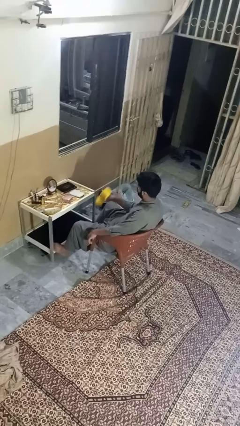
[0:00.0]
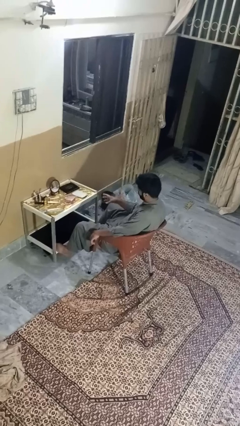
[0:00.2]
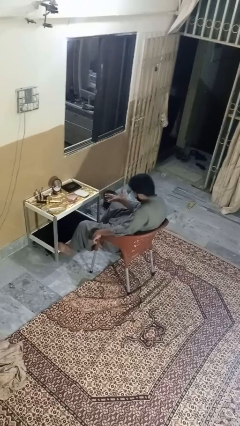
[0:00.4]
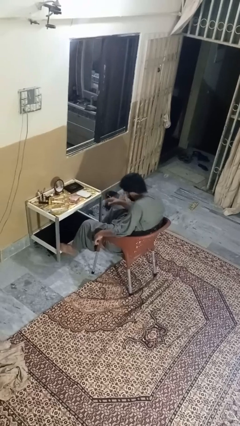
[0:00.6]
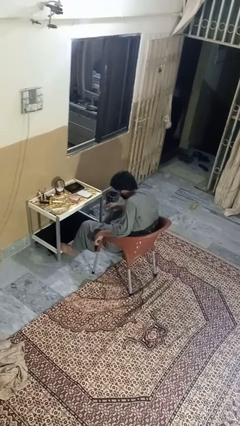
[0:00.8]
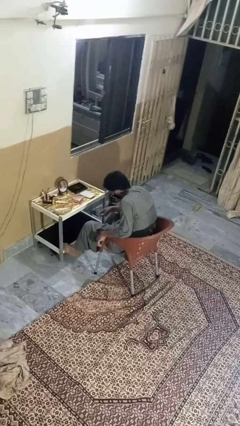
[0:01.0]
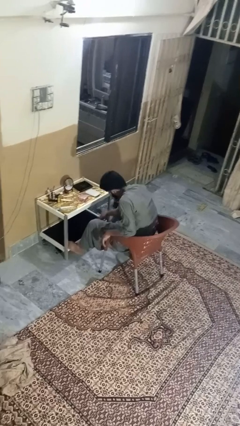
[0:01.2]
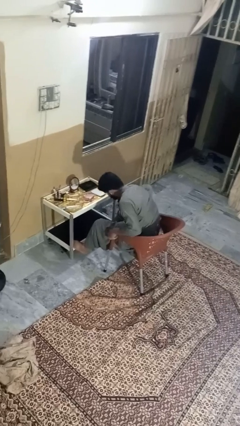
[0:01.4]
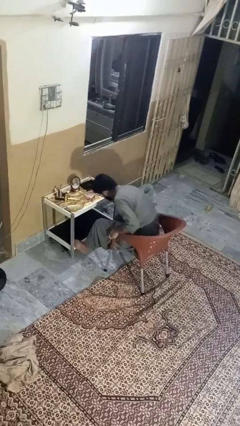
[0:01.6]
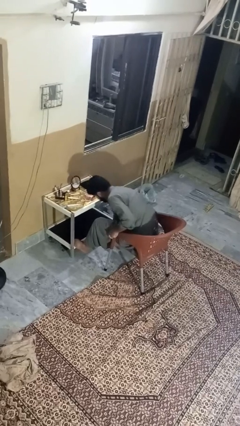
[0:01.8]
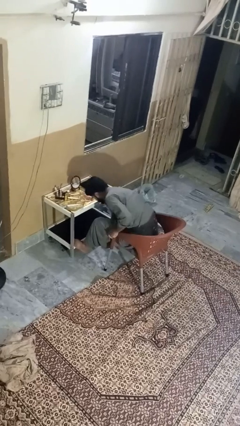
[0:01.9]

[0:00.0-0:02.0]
person throws object to ground

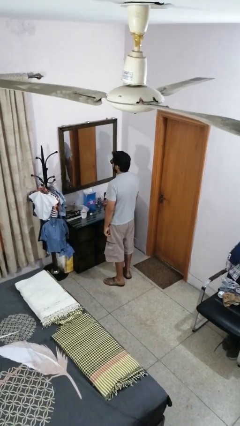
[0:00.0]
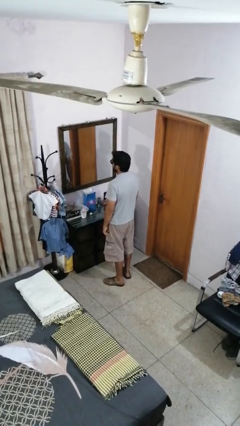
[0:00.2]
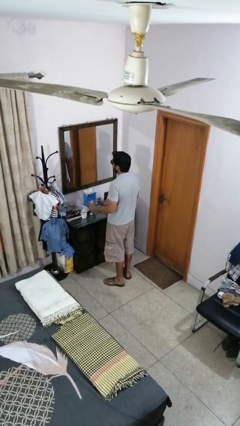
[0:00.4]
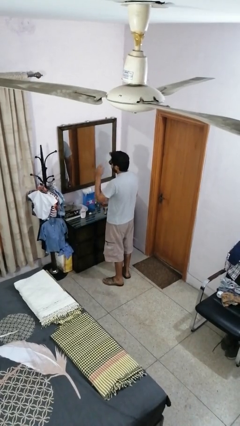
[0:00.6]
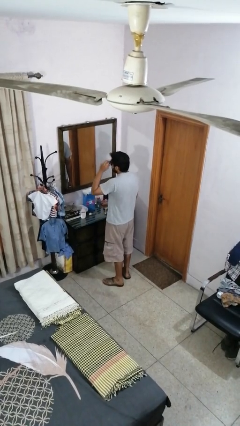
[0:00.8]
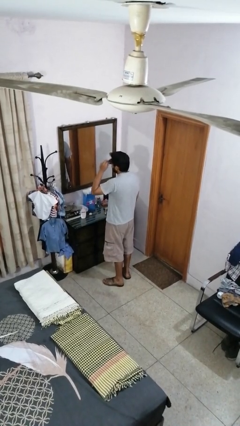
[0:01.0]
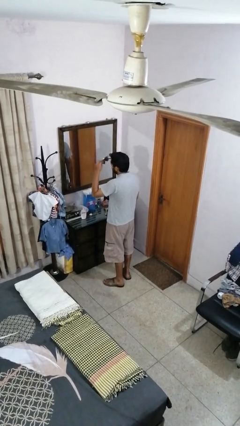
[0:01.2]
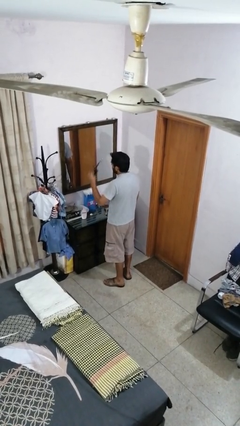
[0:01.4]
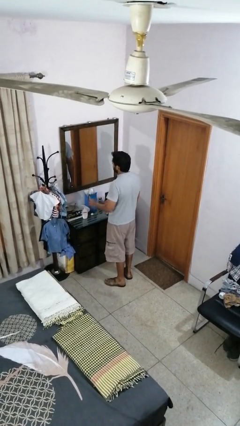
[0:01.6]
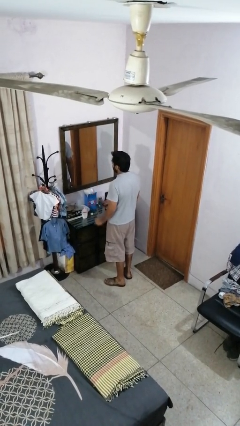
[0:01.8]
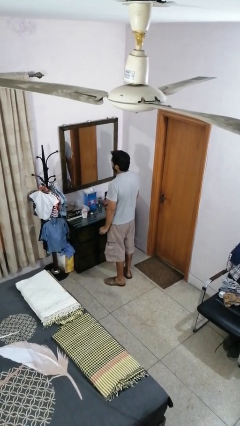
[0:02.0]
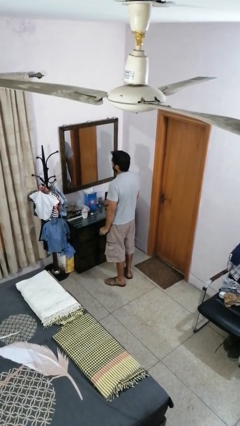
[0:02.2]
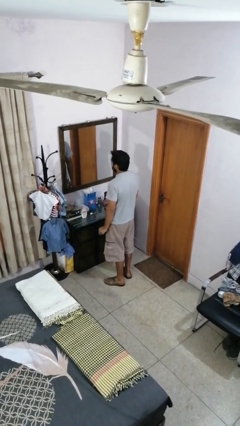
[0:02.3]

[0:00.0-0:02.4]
person takes off sunglasses

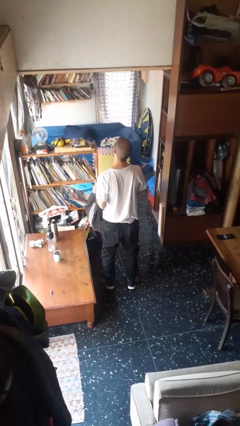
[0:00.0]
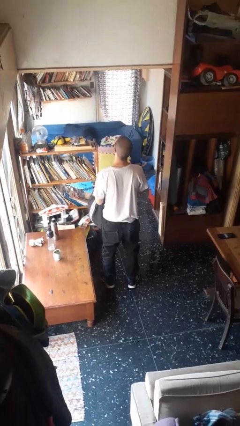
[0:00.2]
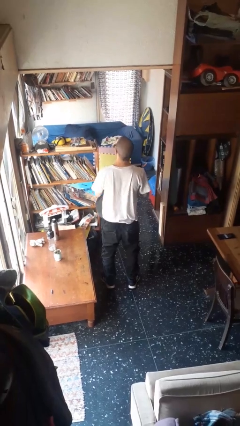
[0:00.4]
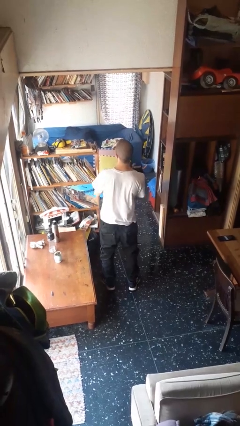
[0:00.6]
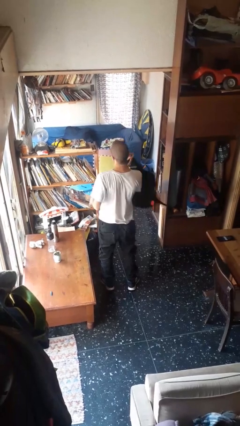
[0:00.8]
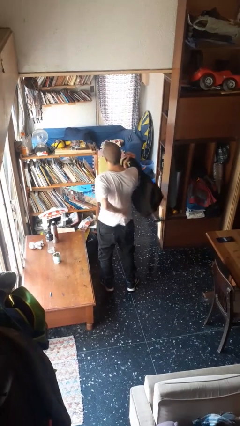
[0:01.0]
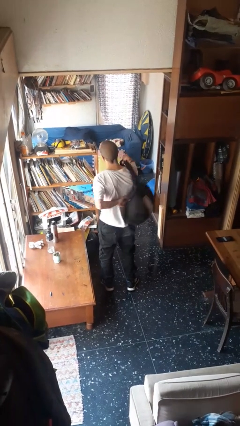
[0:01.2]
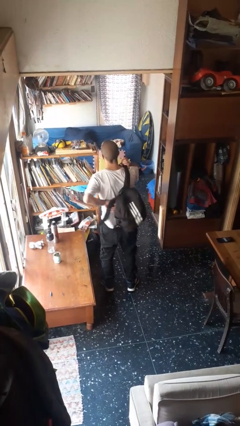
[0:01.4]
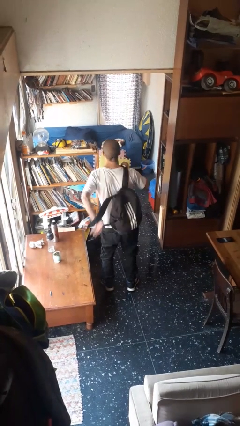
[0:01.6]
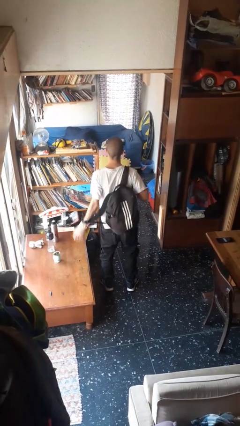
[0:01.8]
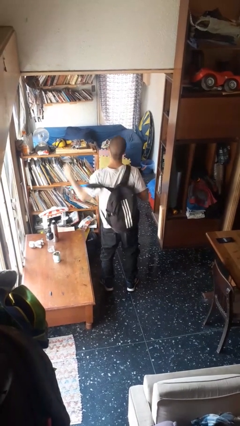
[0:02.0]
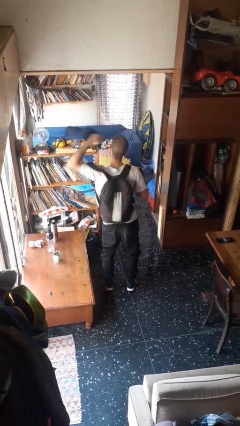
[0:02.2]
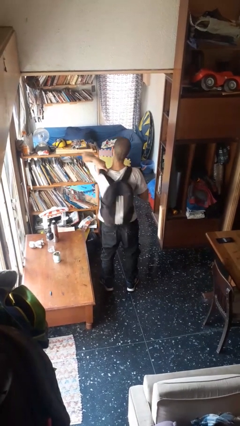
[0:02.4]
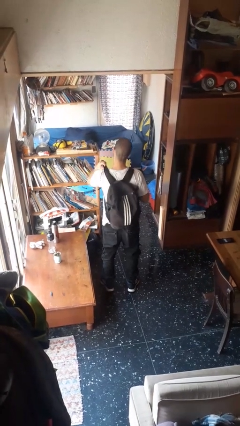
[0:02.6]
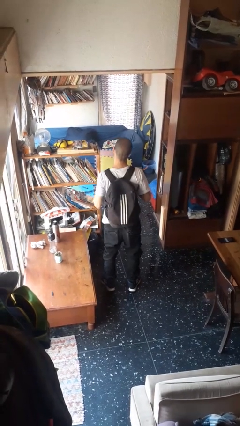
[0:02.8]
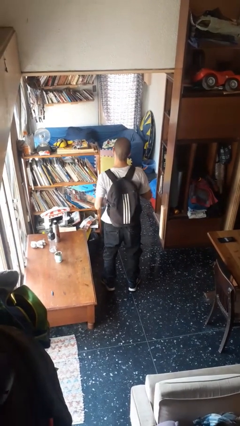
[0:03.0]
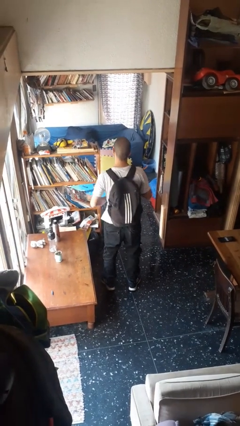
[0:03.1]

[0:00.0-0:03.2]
person puts on backpack

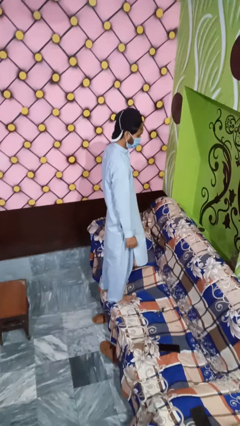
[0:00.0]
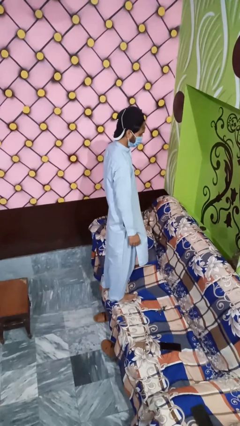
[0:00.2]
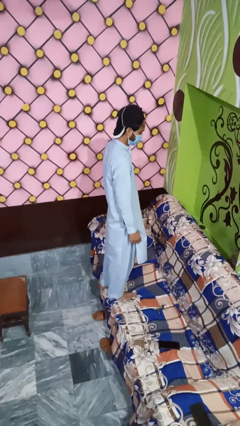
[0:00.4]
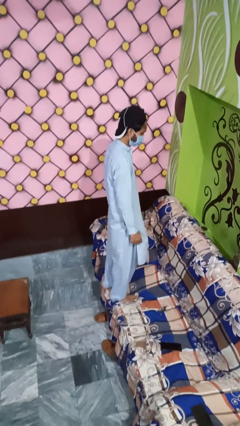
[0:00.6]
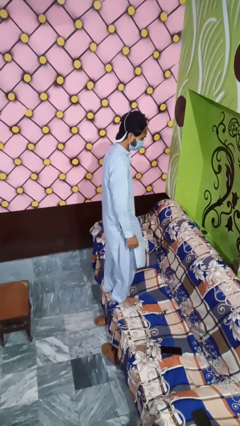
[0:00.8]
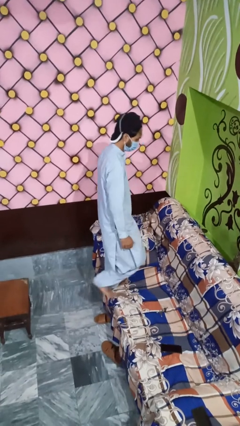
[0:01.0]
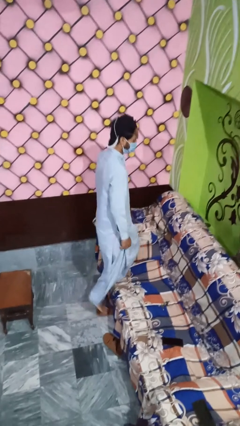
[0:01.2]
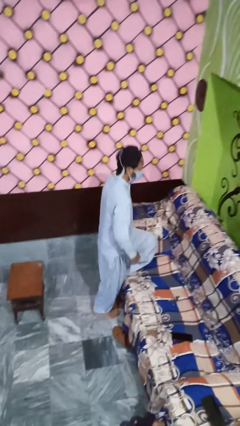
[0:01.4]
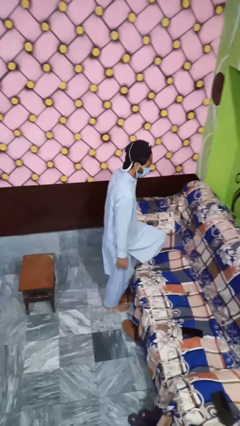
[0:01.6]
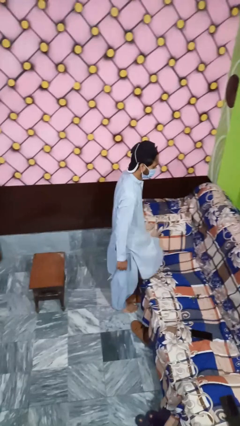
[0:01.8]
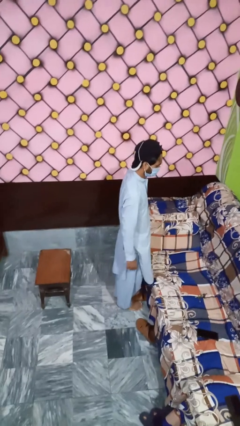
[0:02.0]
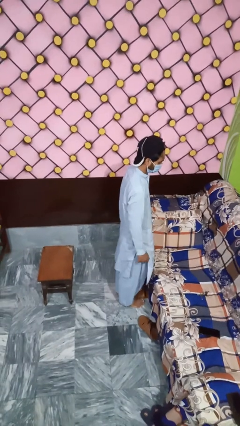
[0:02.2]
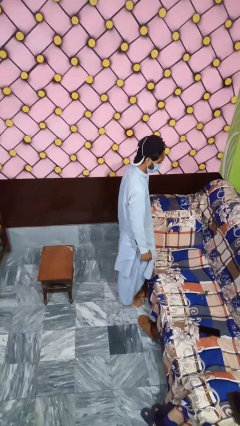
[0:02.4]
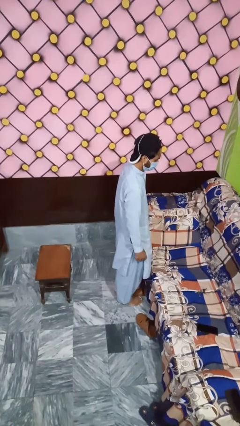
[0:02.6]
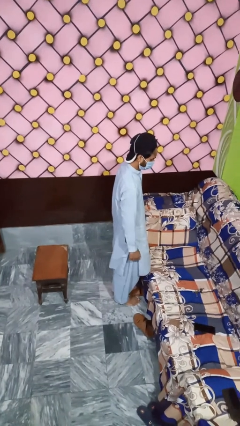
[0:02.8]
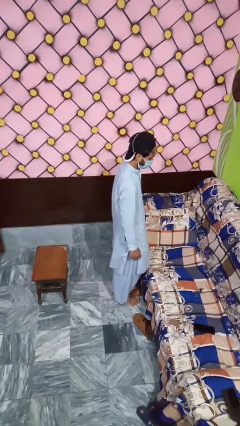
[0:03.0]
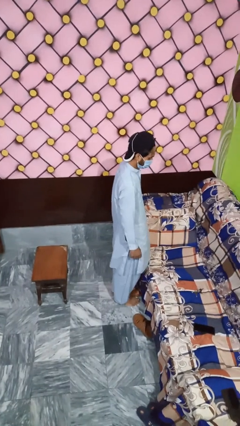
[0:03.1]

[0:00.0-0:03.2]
person climbs off couch

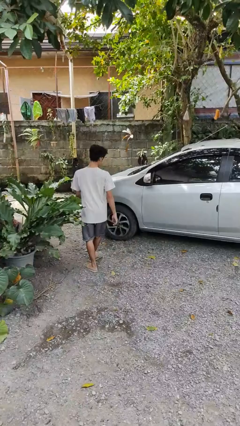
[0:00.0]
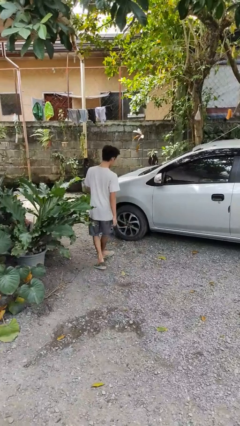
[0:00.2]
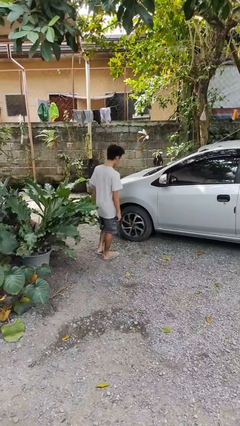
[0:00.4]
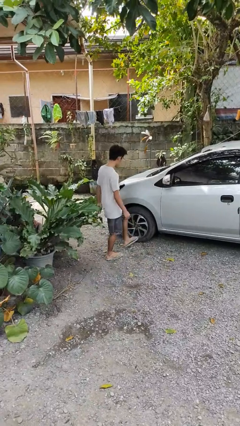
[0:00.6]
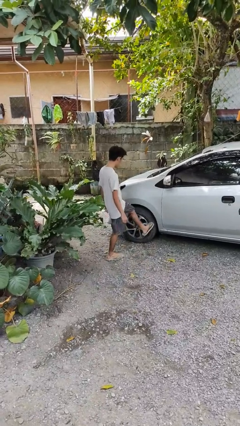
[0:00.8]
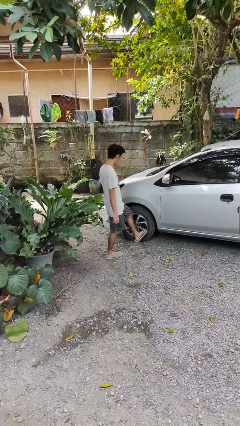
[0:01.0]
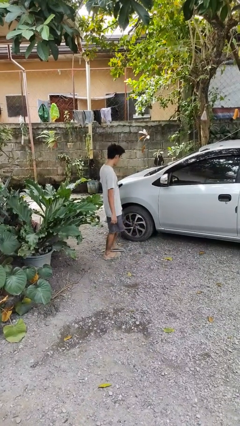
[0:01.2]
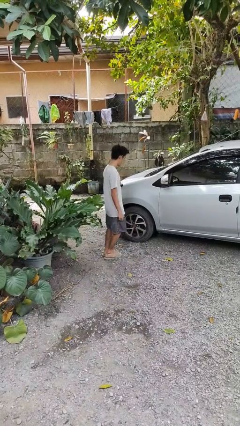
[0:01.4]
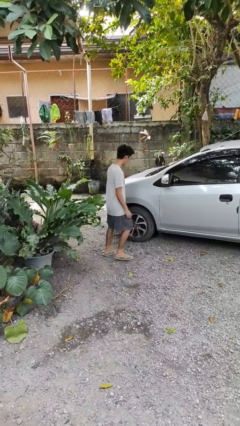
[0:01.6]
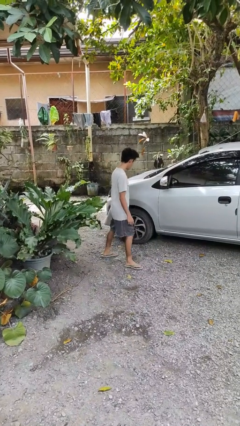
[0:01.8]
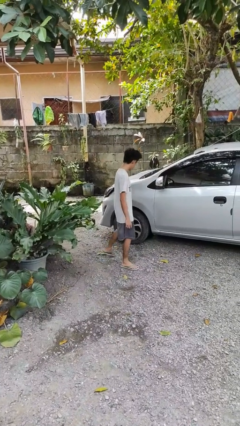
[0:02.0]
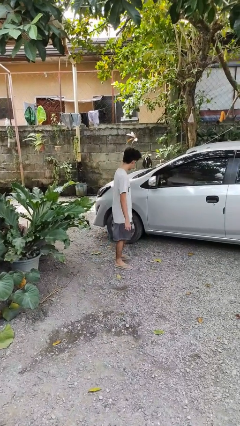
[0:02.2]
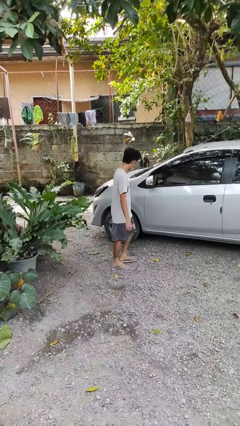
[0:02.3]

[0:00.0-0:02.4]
person kicks car tires

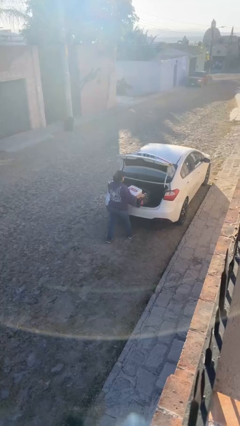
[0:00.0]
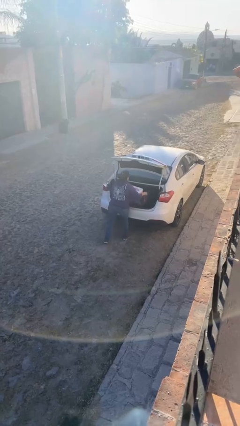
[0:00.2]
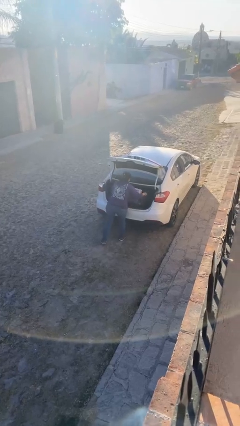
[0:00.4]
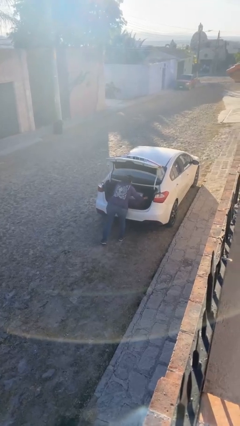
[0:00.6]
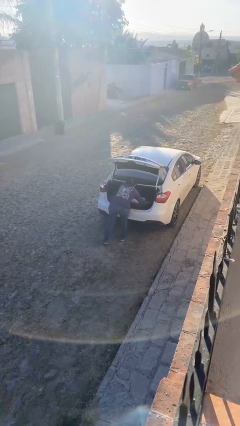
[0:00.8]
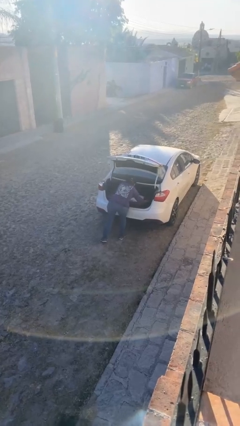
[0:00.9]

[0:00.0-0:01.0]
person loads car

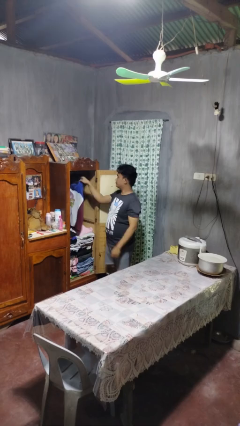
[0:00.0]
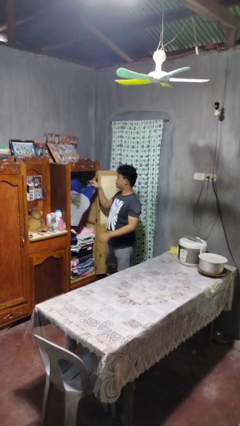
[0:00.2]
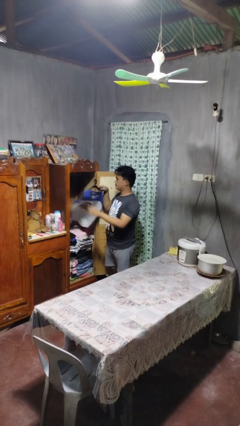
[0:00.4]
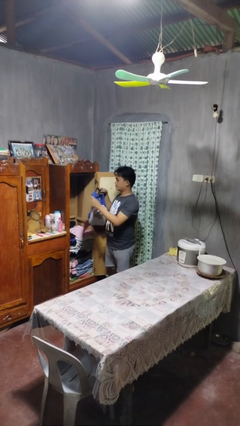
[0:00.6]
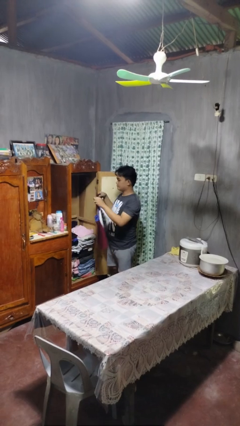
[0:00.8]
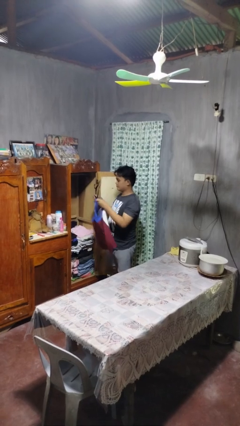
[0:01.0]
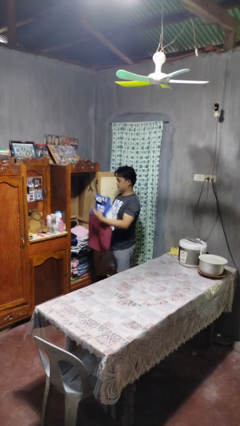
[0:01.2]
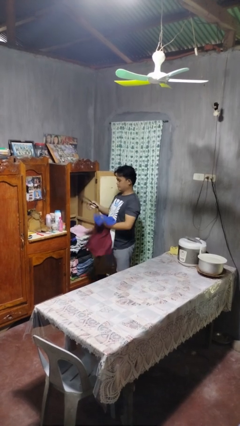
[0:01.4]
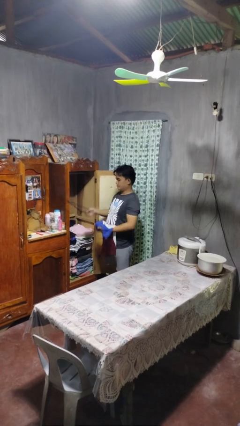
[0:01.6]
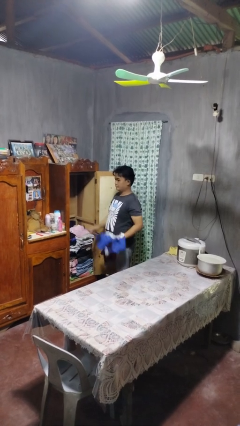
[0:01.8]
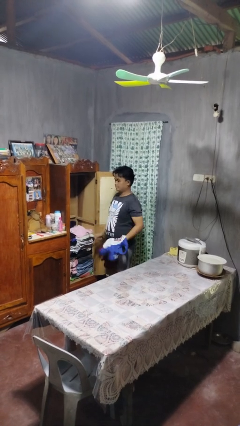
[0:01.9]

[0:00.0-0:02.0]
person takes clothes from closet

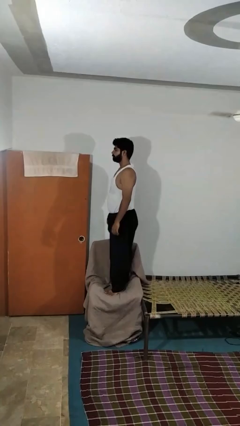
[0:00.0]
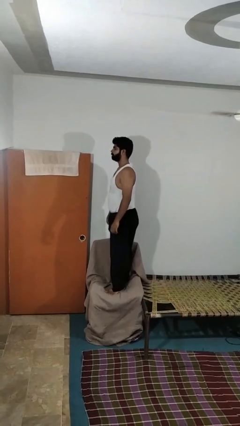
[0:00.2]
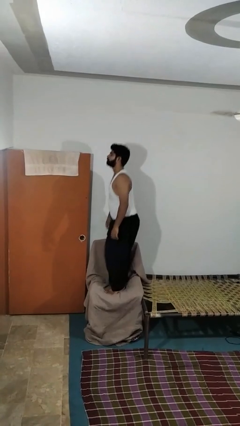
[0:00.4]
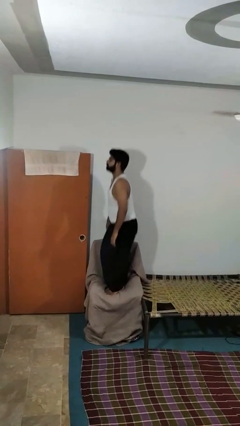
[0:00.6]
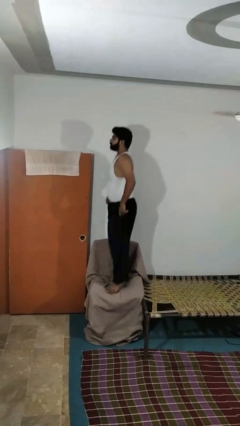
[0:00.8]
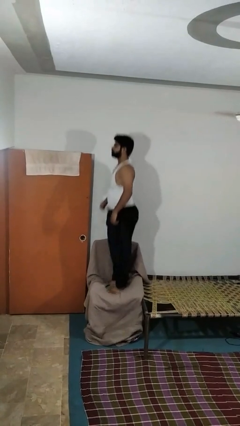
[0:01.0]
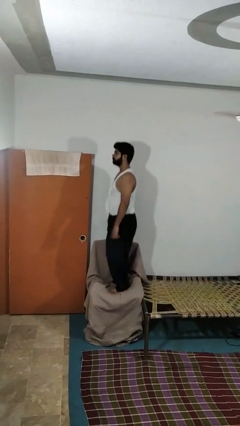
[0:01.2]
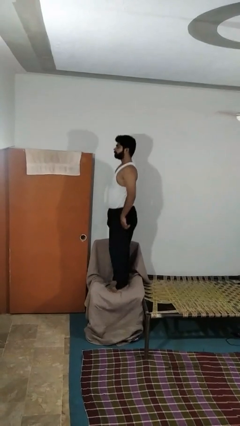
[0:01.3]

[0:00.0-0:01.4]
person jumps on couch
